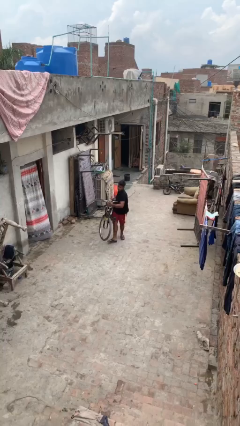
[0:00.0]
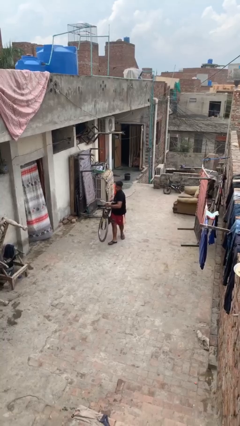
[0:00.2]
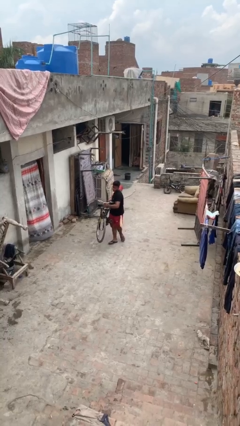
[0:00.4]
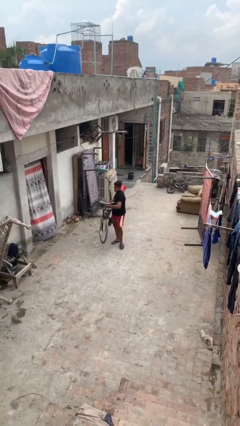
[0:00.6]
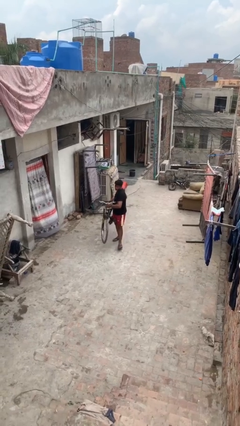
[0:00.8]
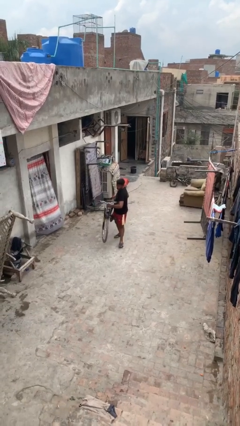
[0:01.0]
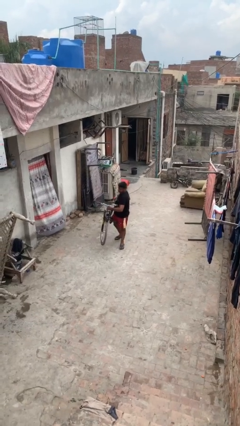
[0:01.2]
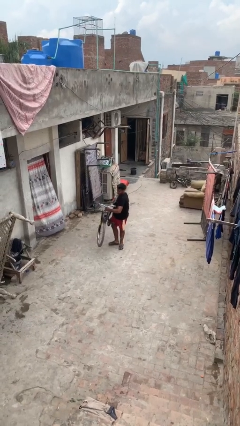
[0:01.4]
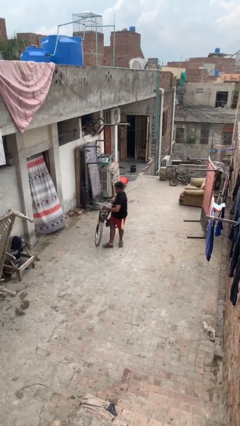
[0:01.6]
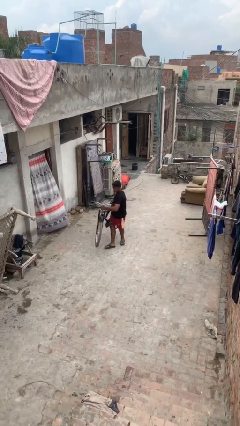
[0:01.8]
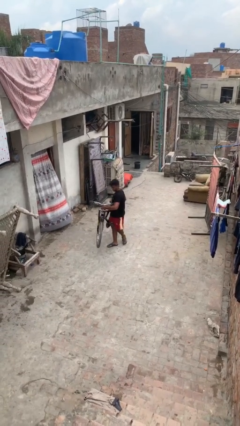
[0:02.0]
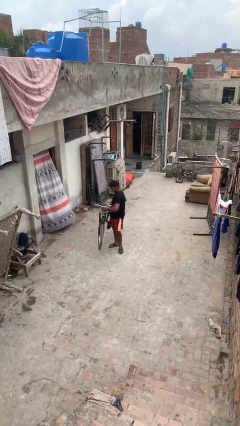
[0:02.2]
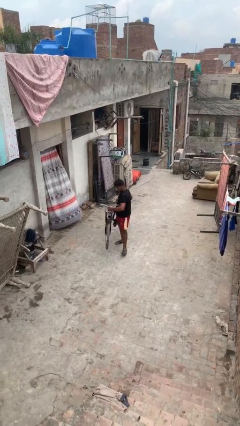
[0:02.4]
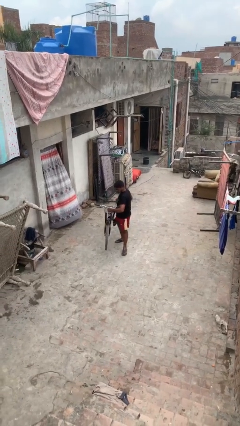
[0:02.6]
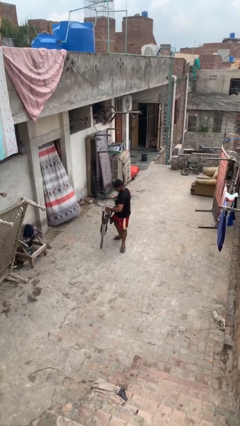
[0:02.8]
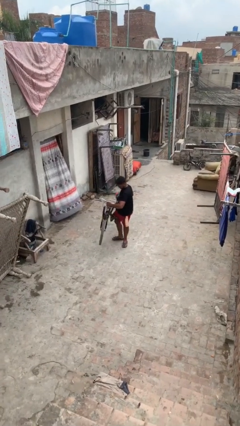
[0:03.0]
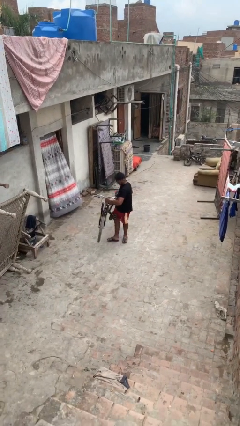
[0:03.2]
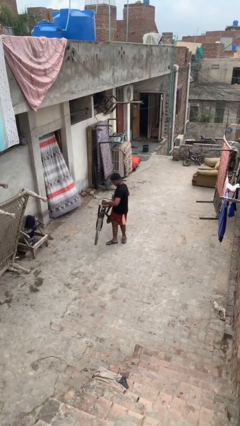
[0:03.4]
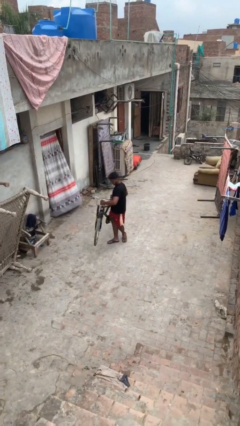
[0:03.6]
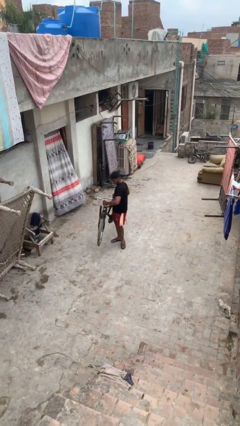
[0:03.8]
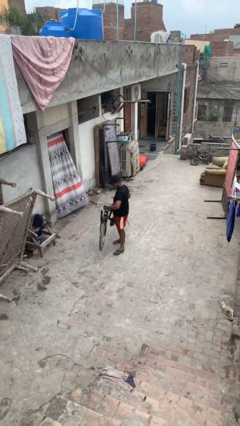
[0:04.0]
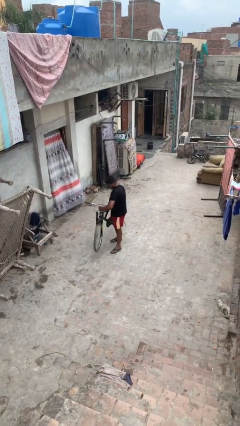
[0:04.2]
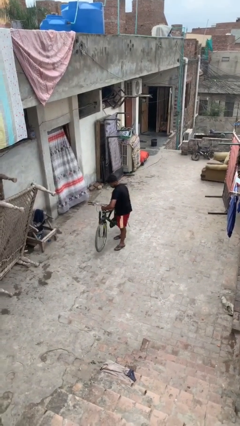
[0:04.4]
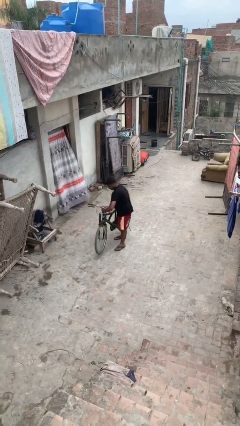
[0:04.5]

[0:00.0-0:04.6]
person carries heavy object

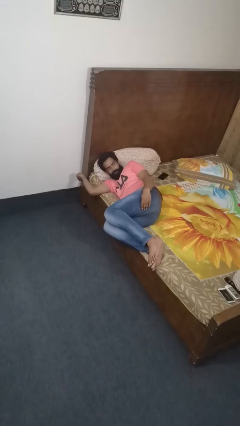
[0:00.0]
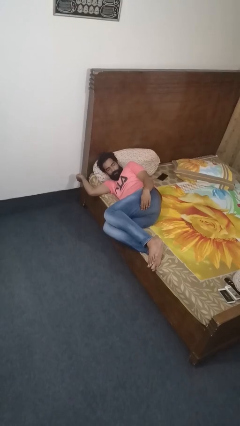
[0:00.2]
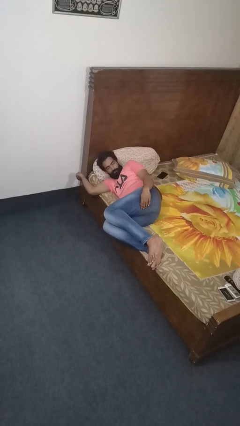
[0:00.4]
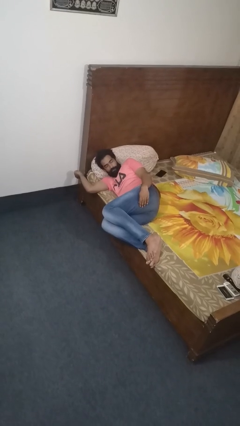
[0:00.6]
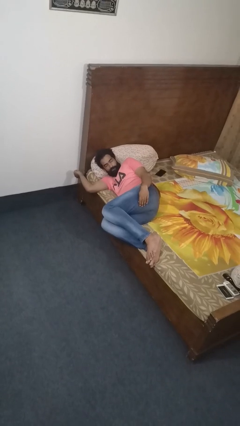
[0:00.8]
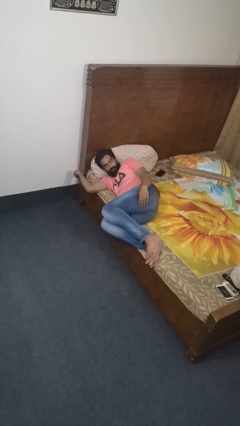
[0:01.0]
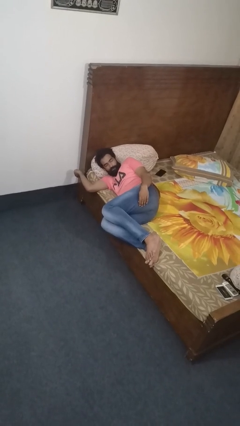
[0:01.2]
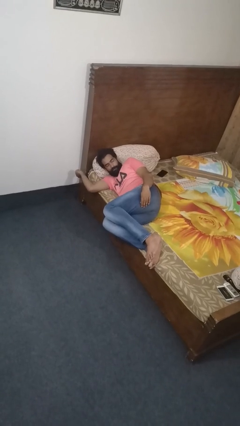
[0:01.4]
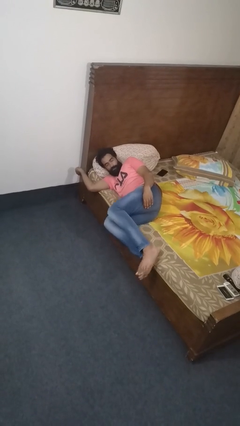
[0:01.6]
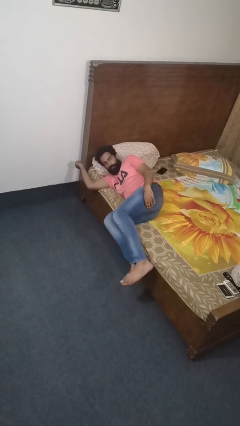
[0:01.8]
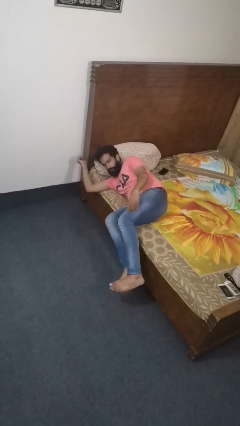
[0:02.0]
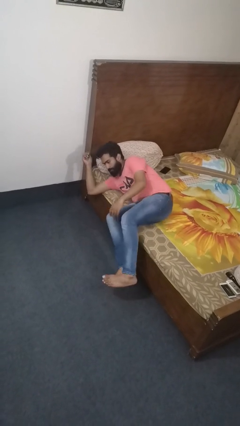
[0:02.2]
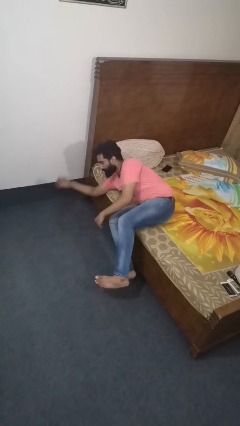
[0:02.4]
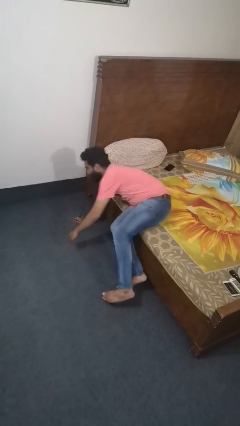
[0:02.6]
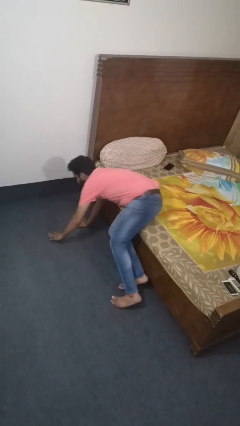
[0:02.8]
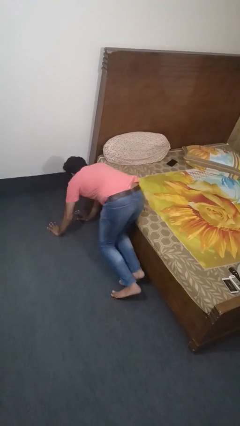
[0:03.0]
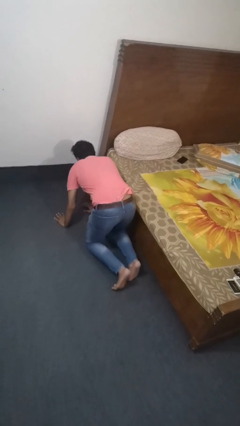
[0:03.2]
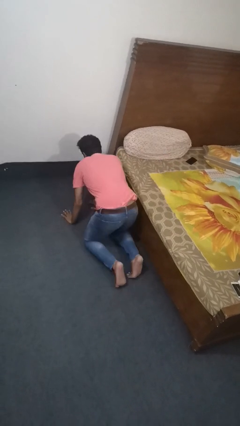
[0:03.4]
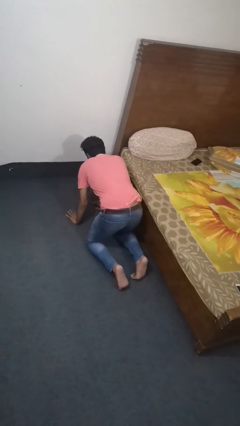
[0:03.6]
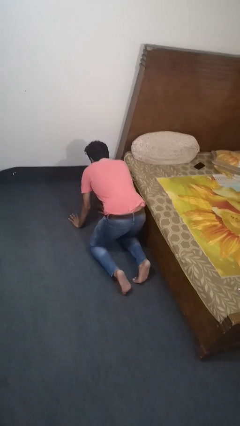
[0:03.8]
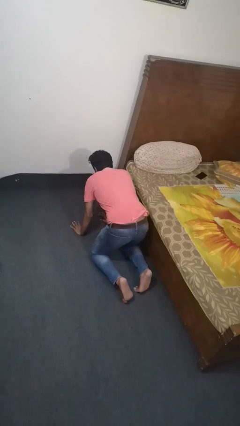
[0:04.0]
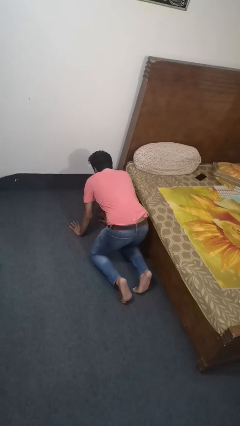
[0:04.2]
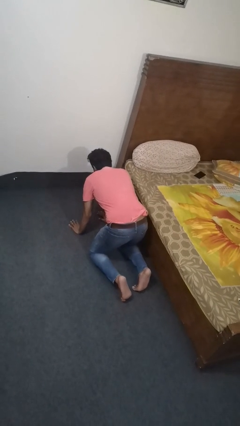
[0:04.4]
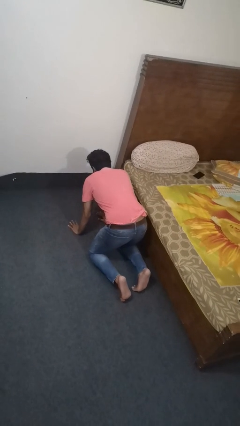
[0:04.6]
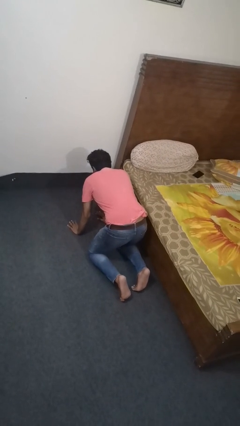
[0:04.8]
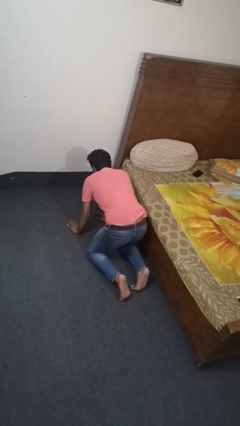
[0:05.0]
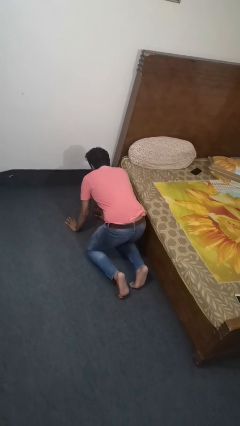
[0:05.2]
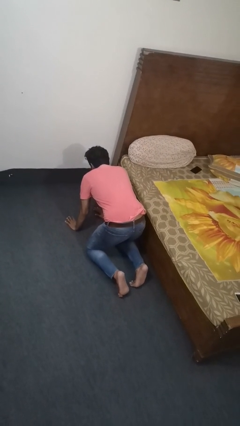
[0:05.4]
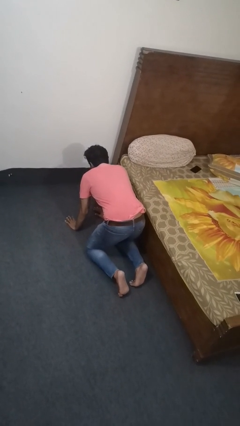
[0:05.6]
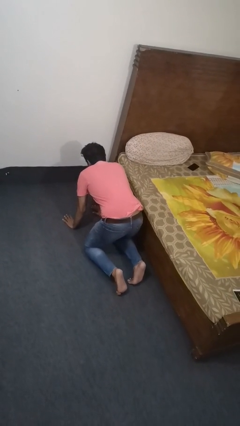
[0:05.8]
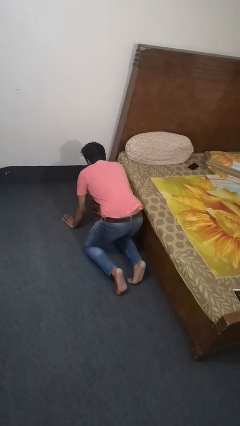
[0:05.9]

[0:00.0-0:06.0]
person falls from bed

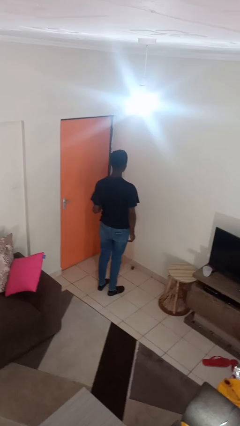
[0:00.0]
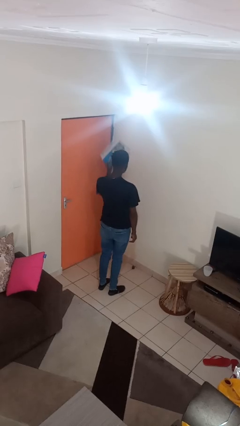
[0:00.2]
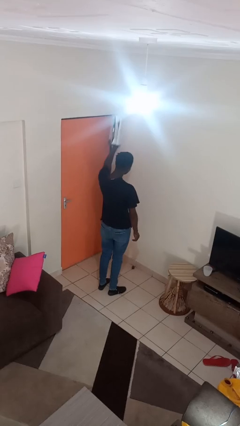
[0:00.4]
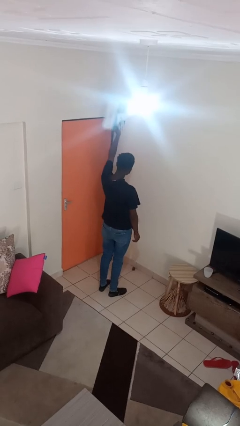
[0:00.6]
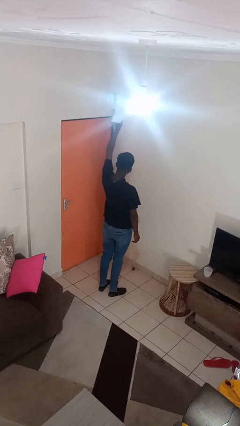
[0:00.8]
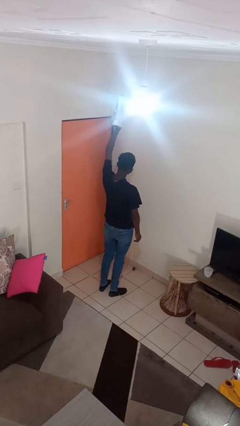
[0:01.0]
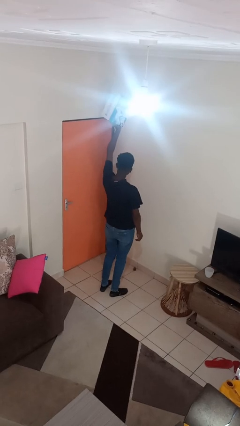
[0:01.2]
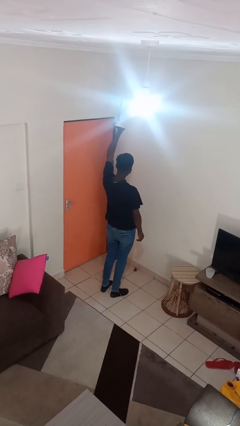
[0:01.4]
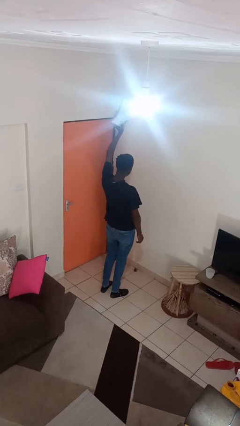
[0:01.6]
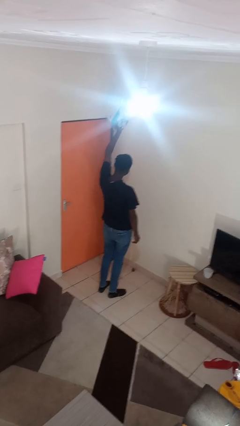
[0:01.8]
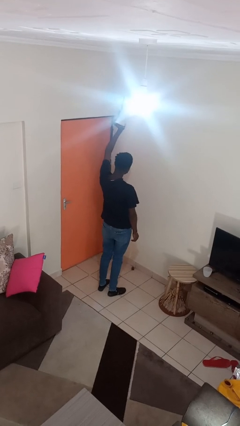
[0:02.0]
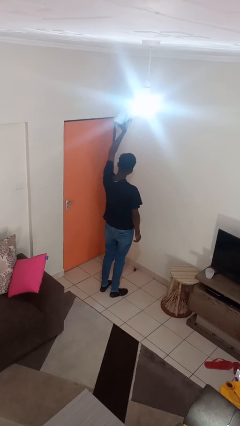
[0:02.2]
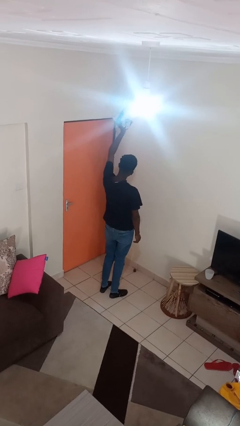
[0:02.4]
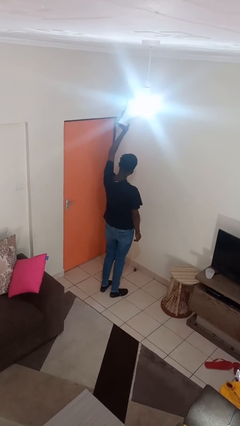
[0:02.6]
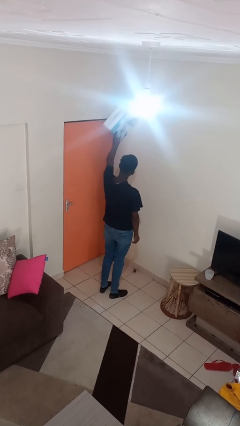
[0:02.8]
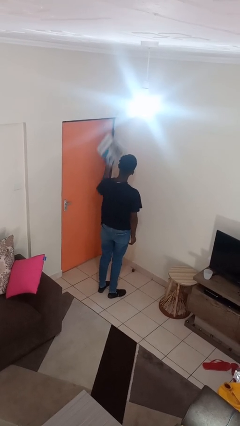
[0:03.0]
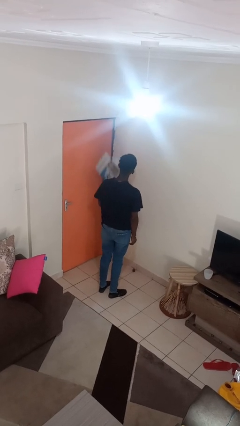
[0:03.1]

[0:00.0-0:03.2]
person holds object above head

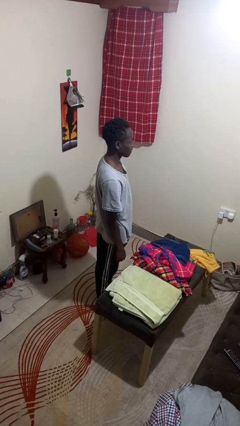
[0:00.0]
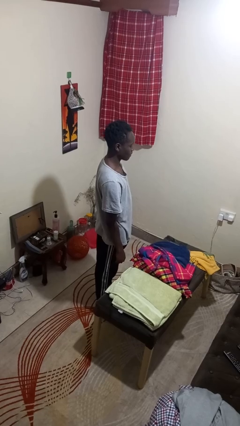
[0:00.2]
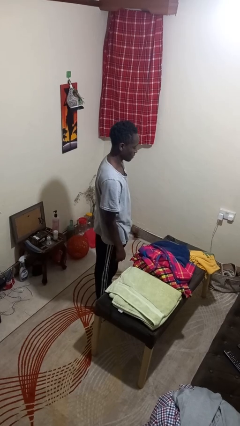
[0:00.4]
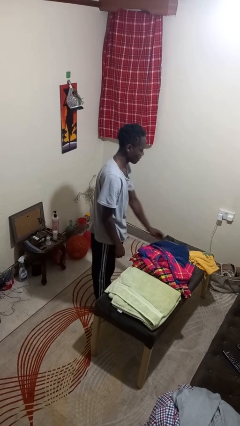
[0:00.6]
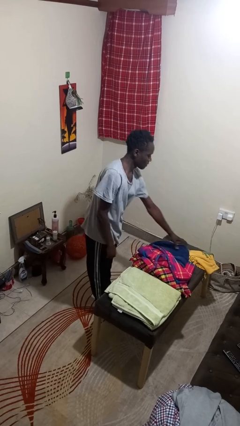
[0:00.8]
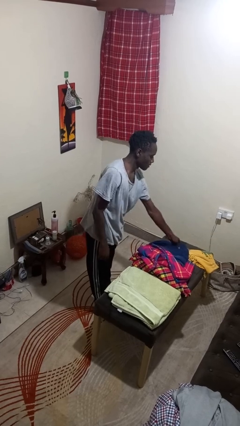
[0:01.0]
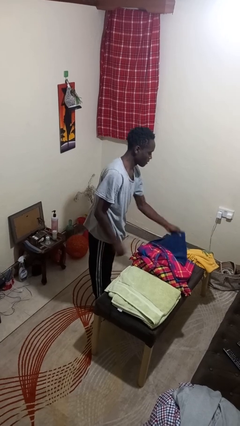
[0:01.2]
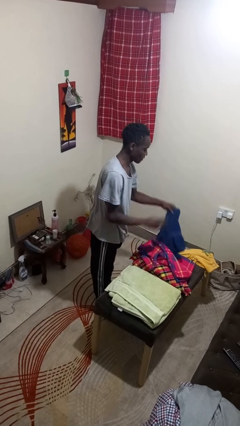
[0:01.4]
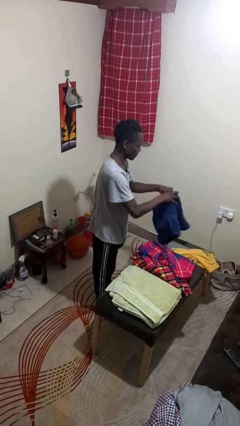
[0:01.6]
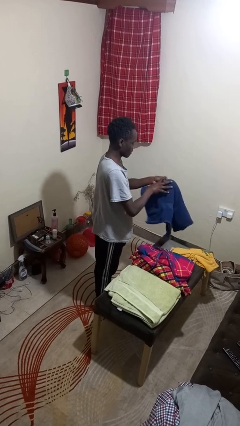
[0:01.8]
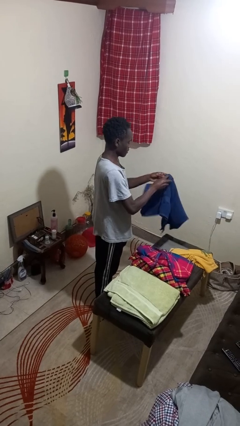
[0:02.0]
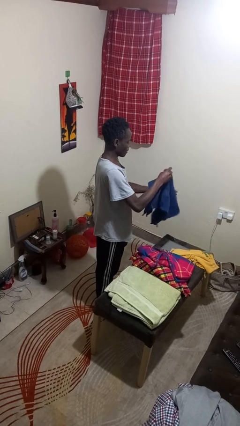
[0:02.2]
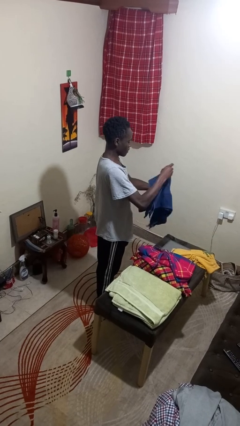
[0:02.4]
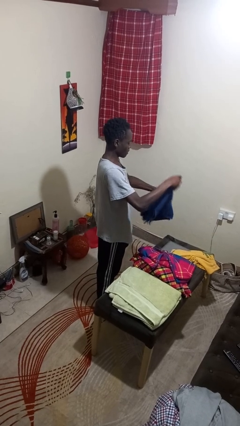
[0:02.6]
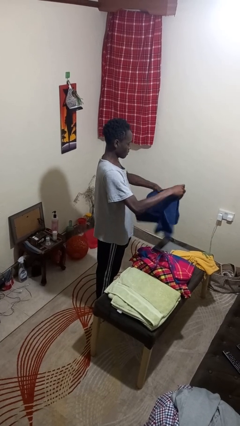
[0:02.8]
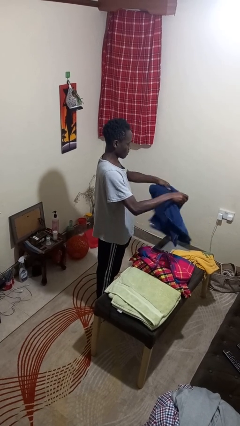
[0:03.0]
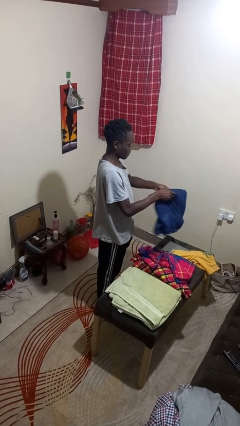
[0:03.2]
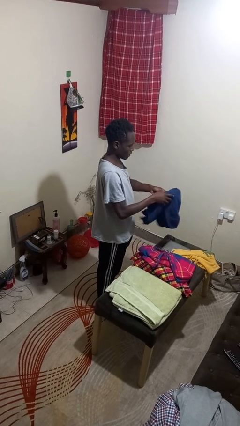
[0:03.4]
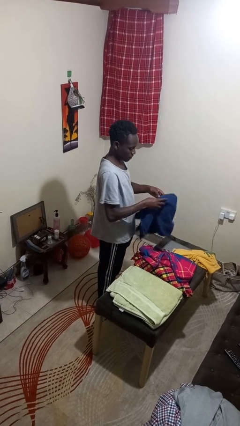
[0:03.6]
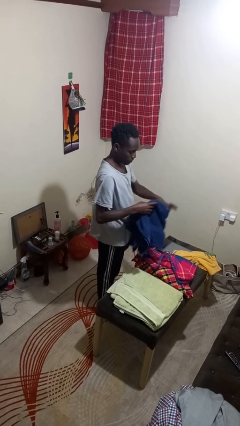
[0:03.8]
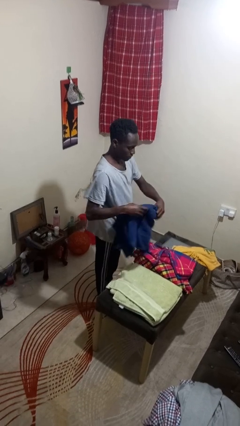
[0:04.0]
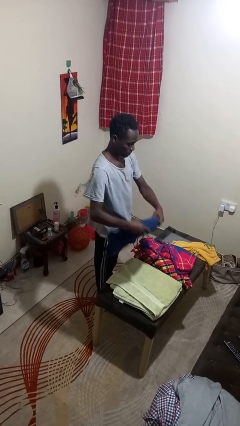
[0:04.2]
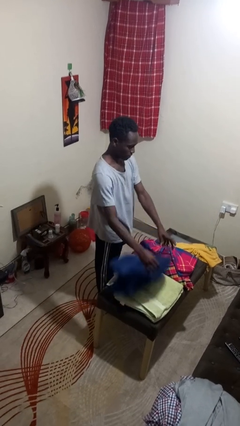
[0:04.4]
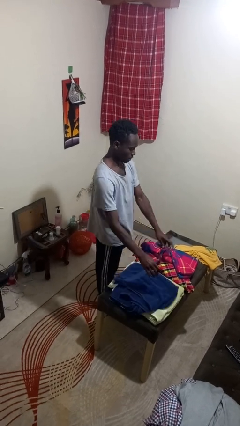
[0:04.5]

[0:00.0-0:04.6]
person folds towel
